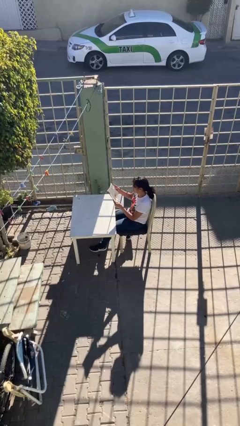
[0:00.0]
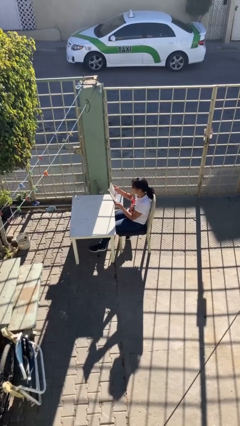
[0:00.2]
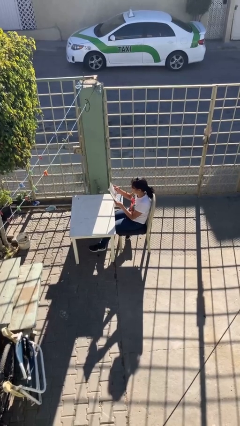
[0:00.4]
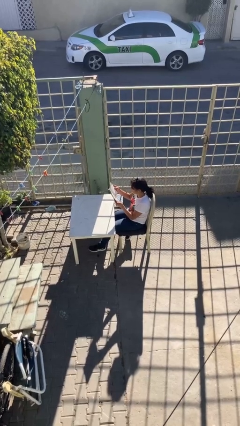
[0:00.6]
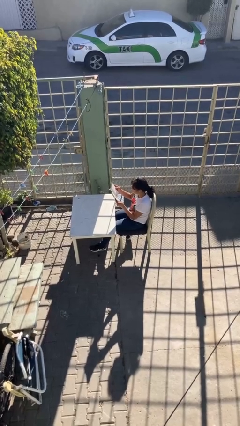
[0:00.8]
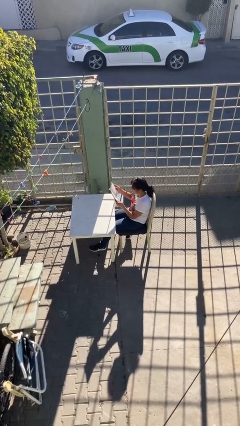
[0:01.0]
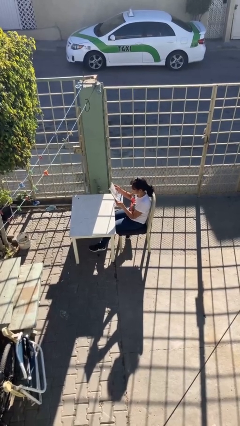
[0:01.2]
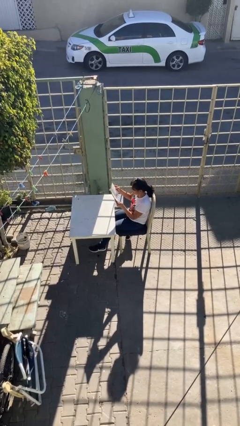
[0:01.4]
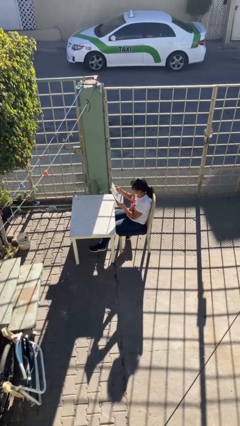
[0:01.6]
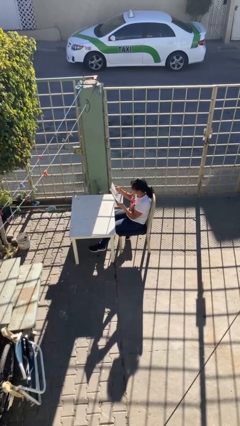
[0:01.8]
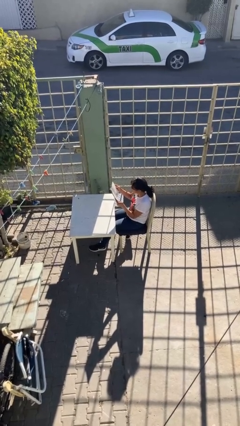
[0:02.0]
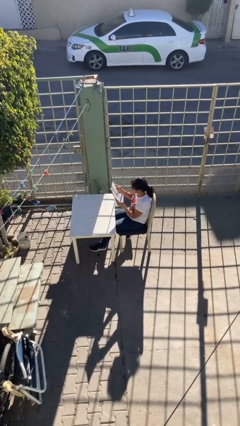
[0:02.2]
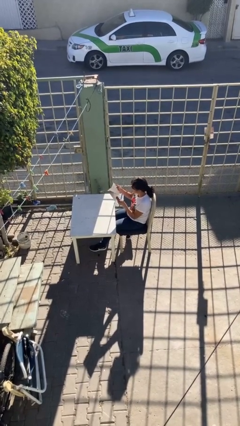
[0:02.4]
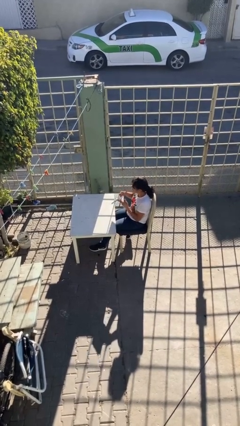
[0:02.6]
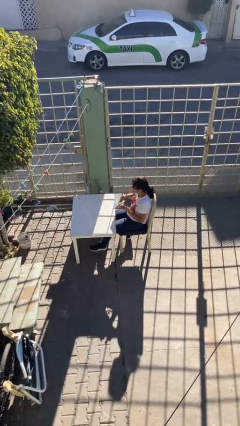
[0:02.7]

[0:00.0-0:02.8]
person reads document

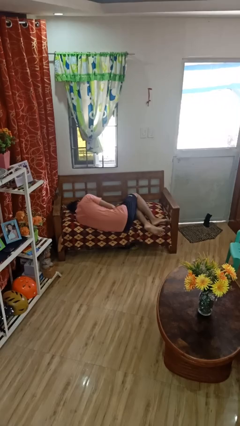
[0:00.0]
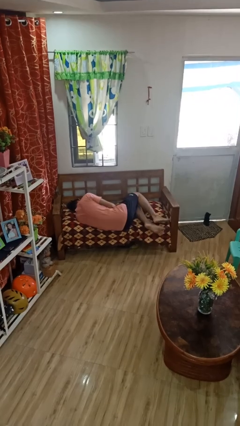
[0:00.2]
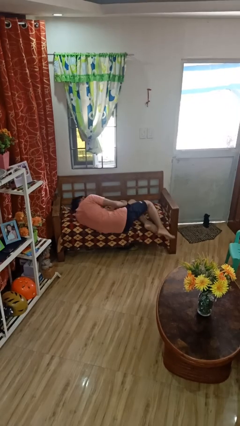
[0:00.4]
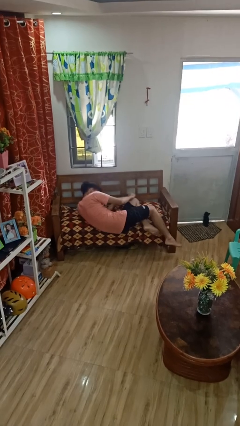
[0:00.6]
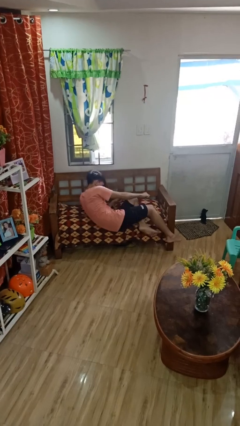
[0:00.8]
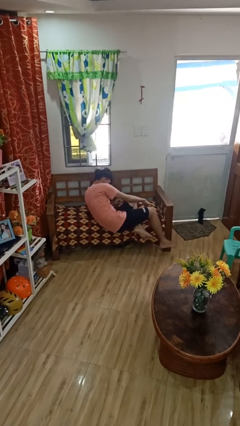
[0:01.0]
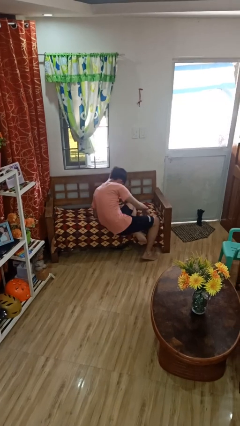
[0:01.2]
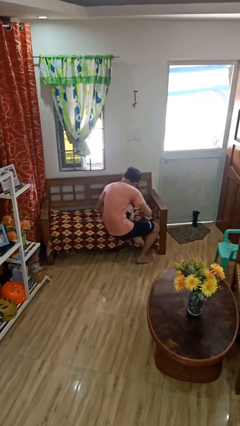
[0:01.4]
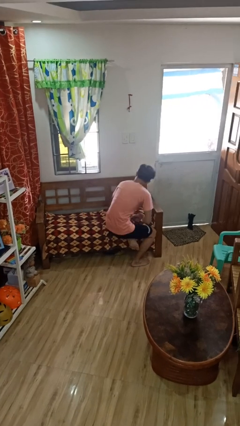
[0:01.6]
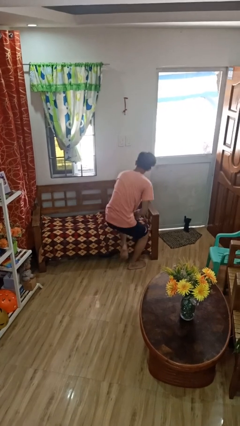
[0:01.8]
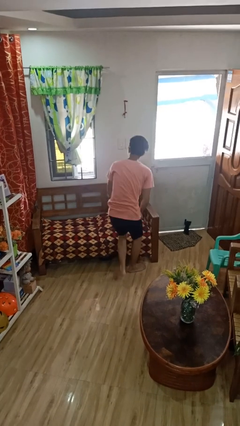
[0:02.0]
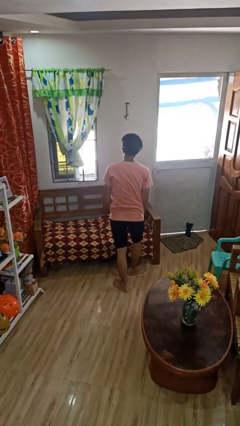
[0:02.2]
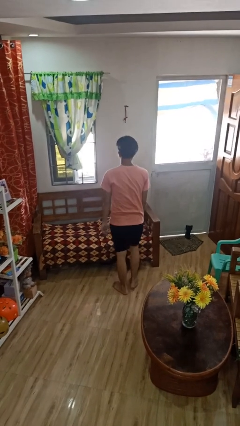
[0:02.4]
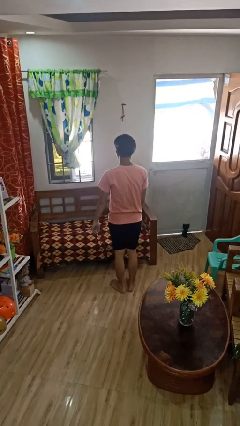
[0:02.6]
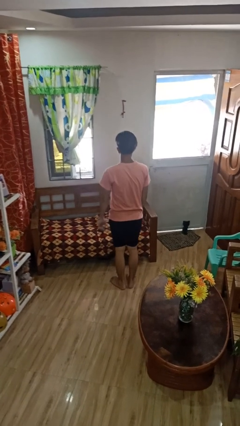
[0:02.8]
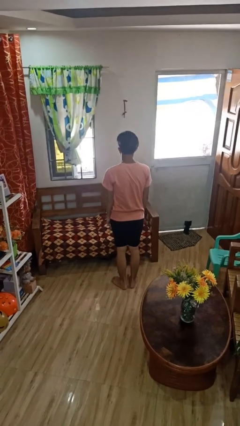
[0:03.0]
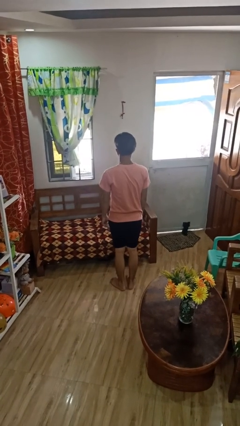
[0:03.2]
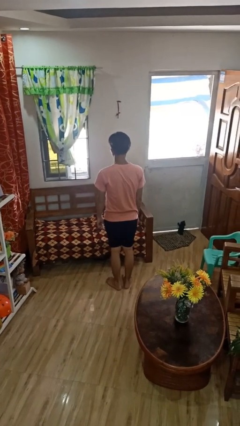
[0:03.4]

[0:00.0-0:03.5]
person stands up

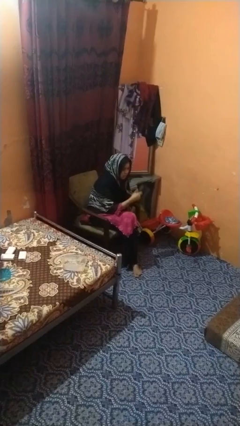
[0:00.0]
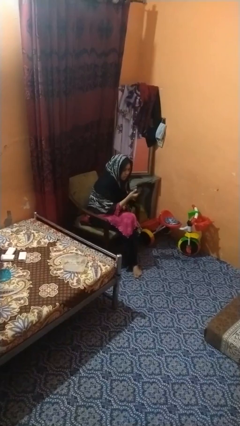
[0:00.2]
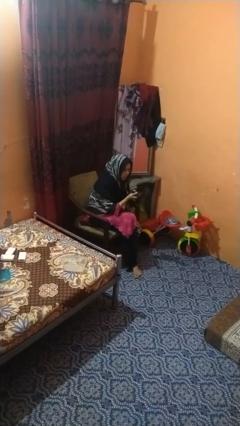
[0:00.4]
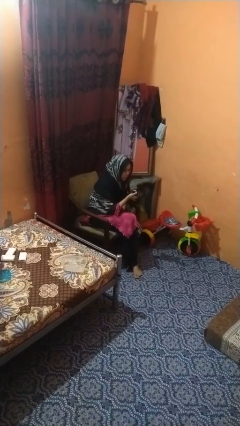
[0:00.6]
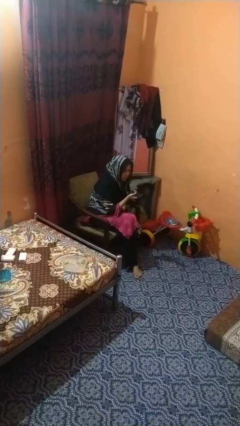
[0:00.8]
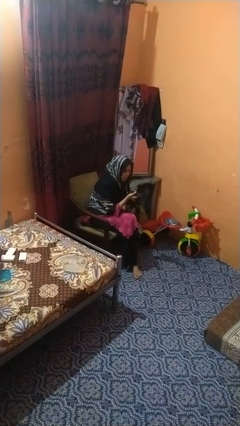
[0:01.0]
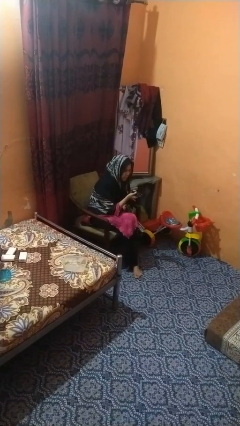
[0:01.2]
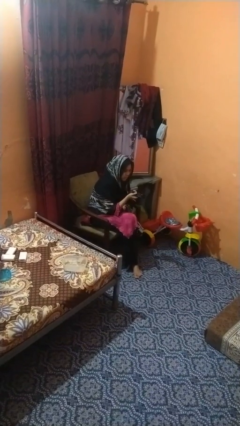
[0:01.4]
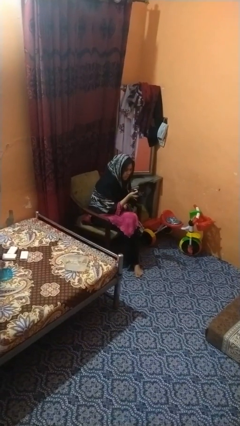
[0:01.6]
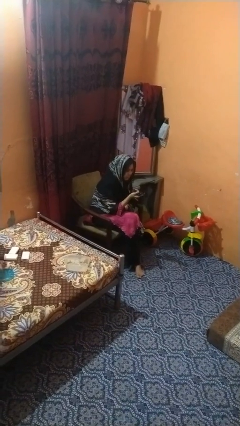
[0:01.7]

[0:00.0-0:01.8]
person uses television remote

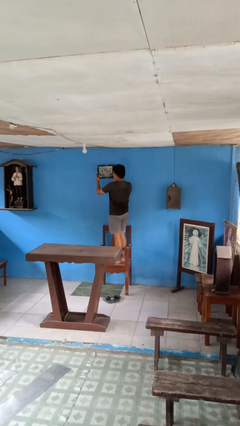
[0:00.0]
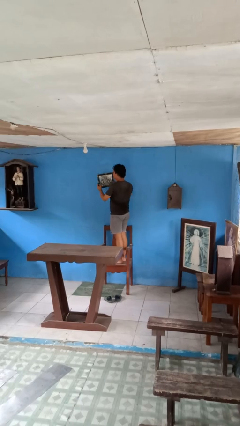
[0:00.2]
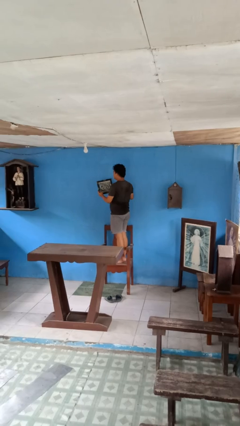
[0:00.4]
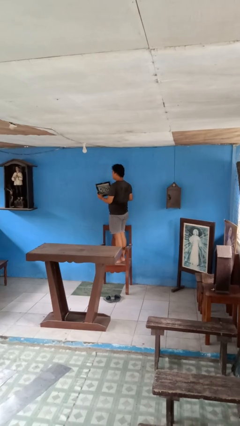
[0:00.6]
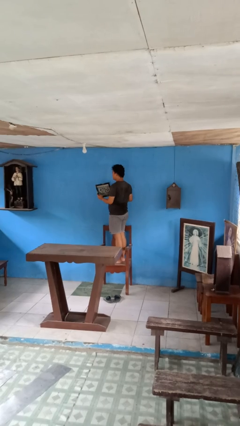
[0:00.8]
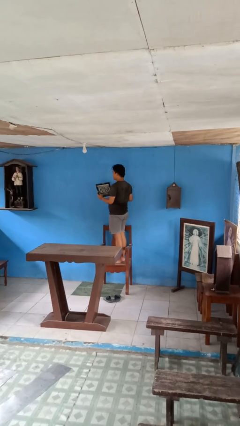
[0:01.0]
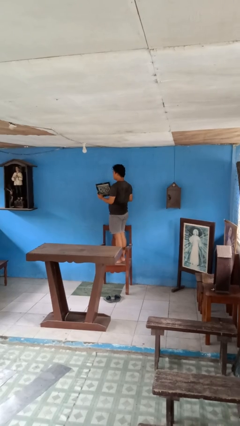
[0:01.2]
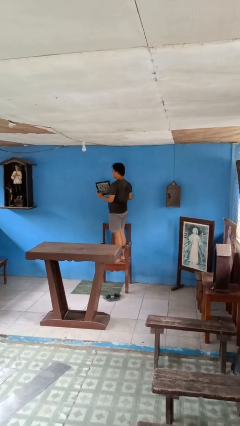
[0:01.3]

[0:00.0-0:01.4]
person takes down picture frame

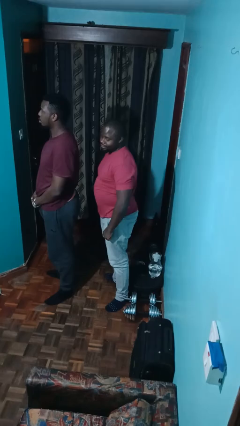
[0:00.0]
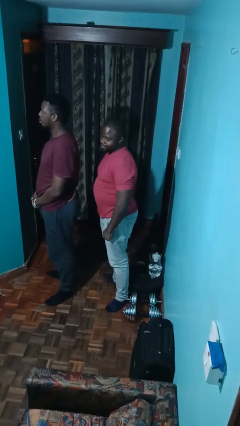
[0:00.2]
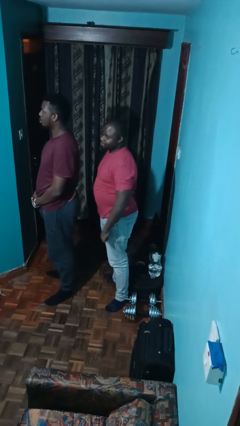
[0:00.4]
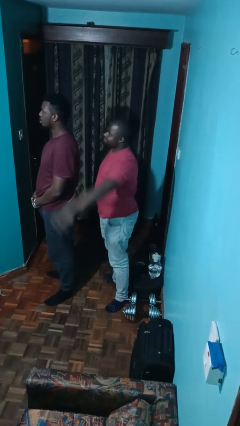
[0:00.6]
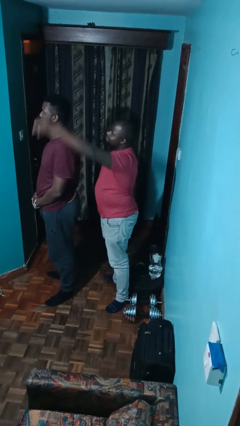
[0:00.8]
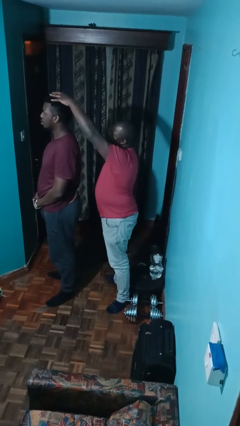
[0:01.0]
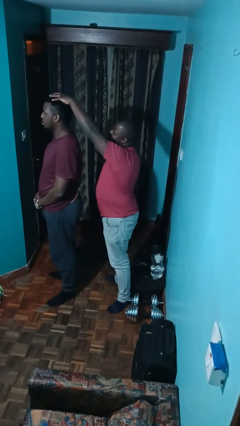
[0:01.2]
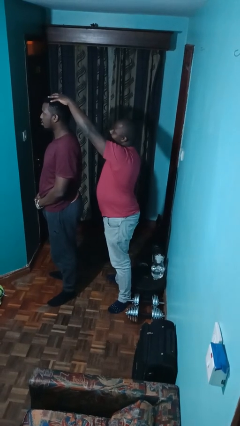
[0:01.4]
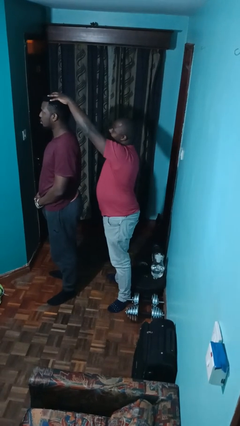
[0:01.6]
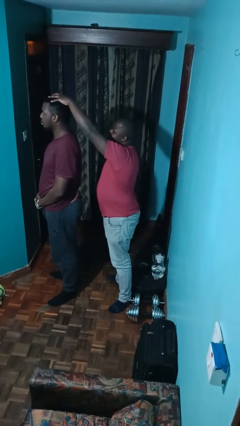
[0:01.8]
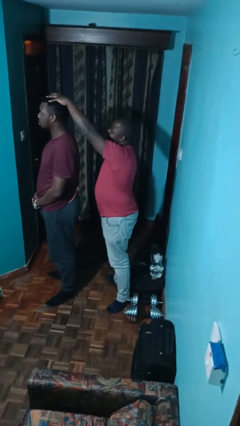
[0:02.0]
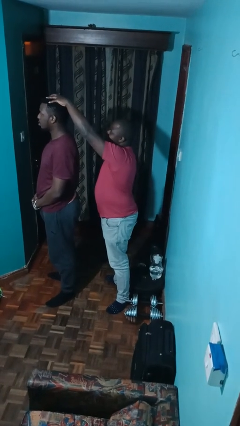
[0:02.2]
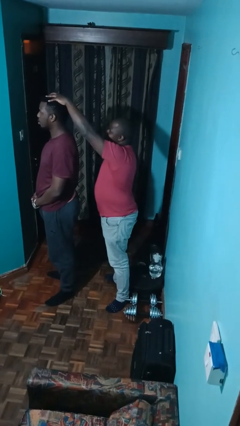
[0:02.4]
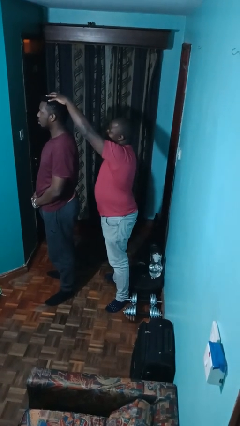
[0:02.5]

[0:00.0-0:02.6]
person grabs person by hair

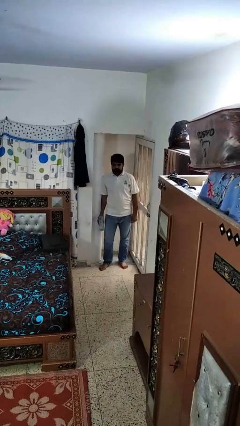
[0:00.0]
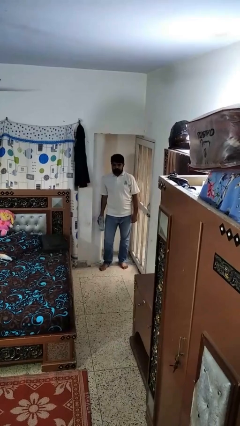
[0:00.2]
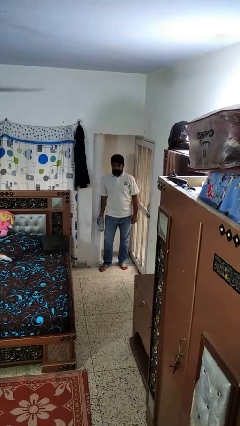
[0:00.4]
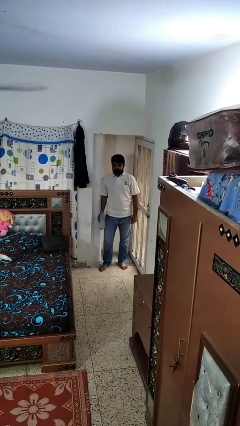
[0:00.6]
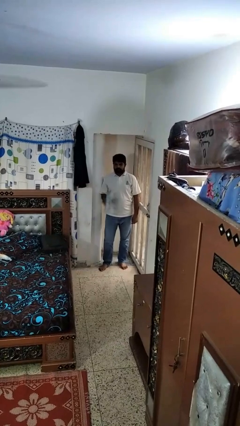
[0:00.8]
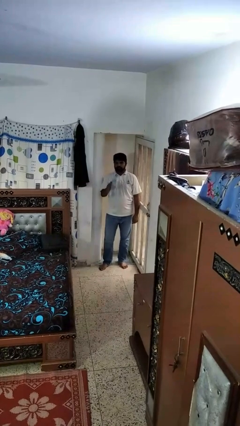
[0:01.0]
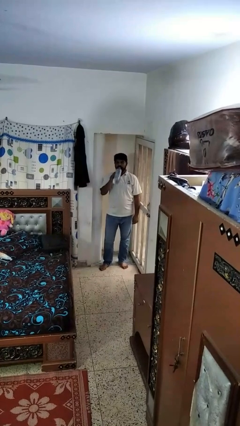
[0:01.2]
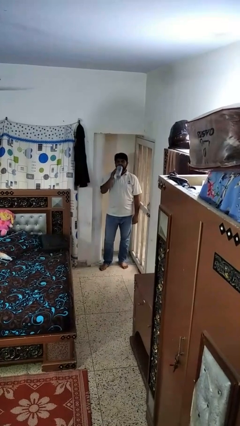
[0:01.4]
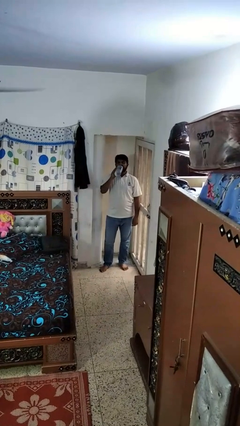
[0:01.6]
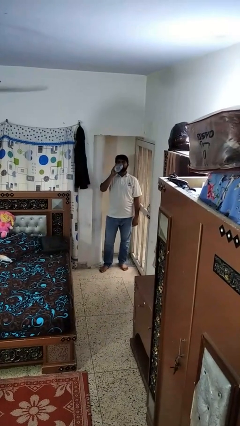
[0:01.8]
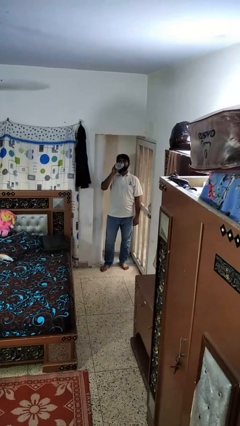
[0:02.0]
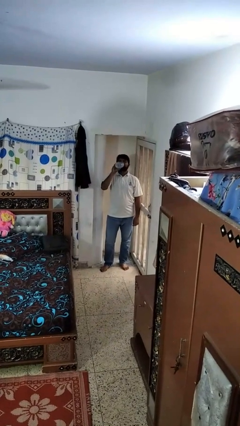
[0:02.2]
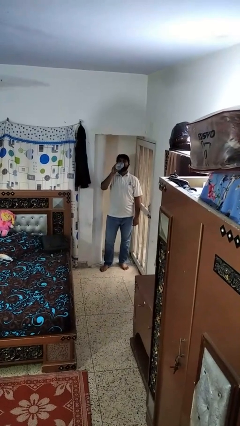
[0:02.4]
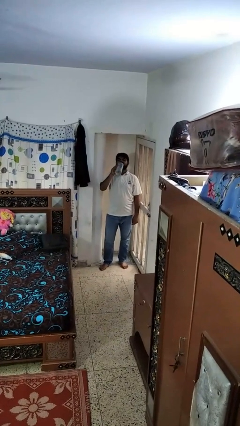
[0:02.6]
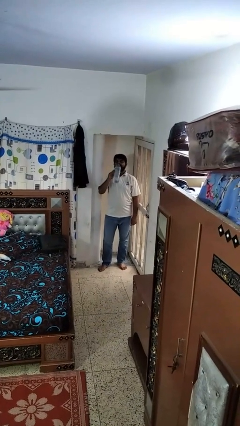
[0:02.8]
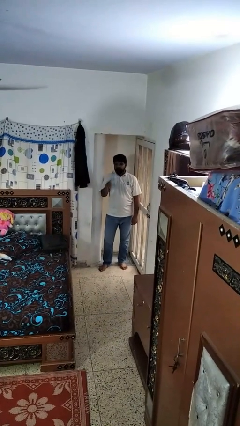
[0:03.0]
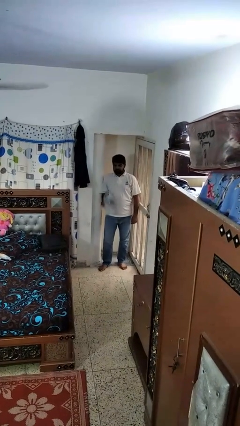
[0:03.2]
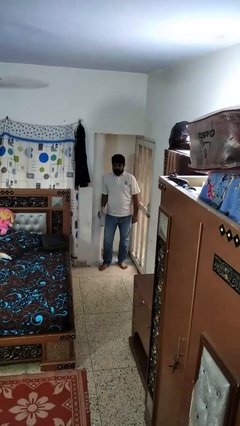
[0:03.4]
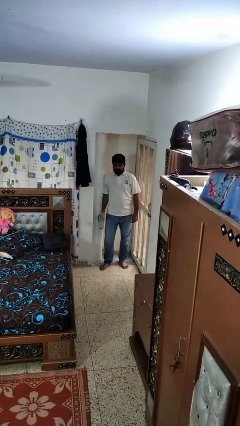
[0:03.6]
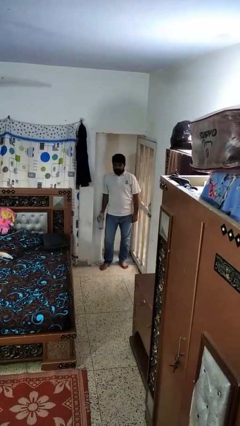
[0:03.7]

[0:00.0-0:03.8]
person drinks from bottle

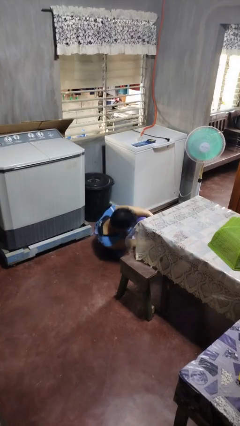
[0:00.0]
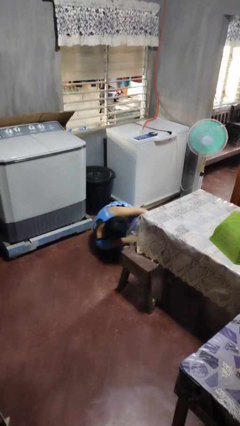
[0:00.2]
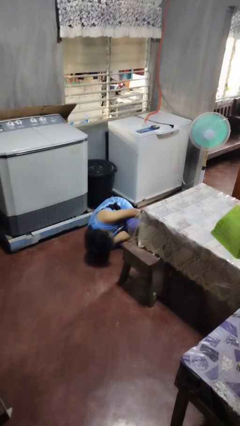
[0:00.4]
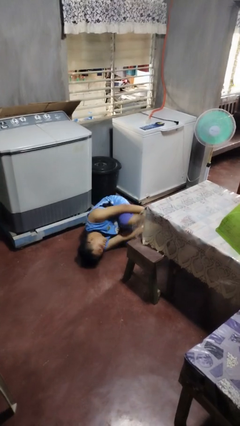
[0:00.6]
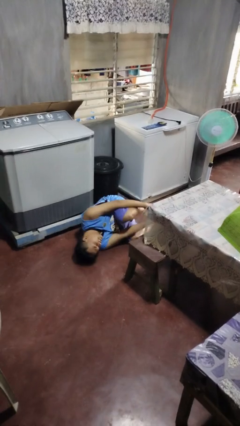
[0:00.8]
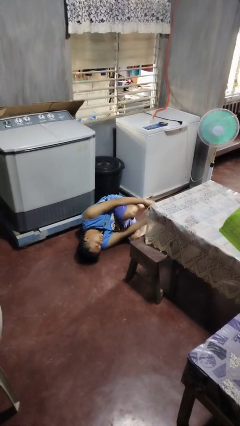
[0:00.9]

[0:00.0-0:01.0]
person lies down on floor

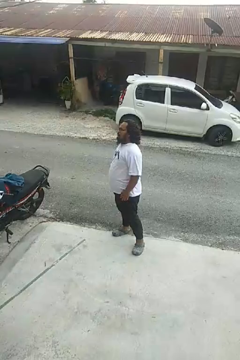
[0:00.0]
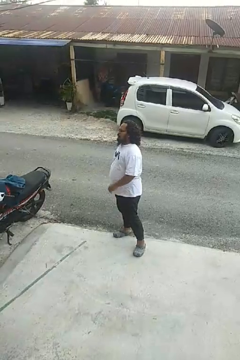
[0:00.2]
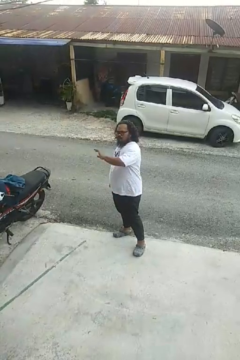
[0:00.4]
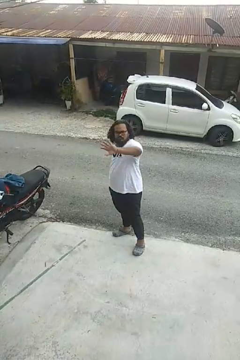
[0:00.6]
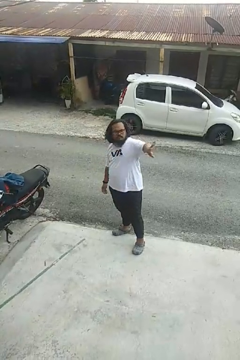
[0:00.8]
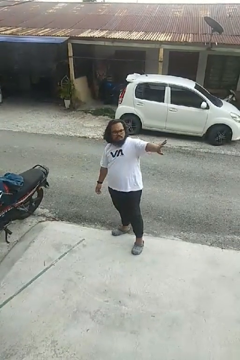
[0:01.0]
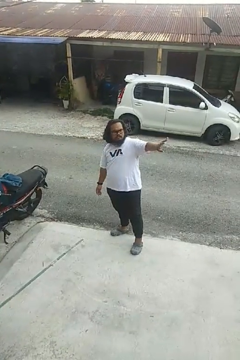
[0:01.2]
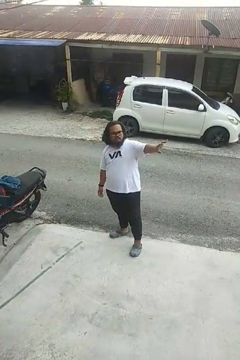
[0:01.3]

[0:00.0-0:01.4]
person gestures swipe left
